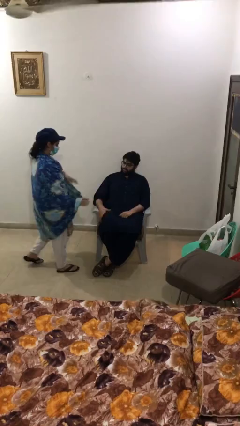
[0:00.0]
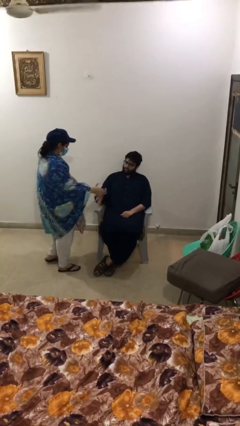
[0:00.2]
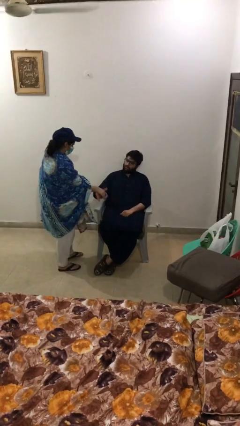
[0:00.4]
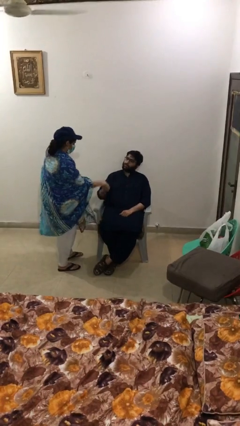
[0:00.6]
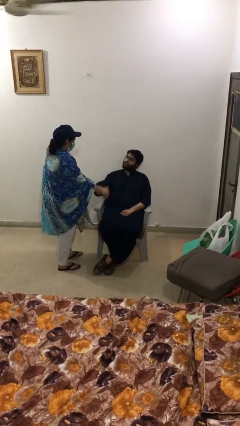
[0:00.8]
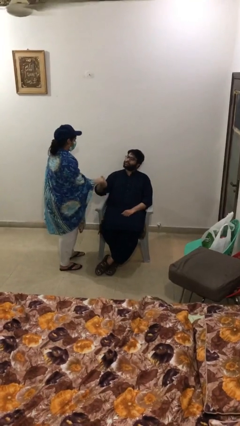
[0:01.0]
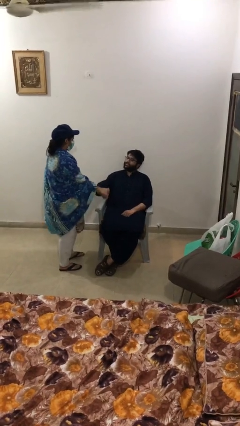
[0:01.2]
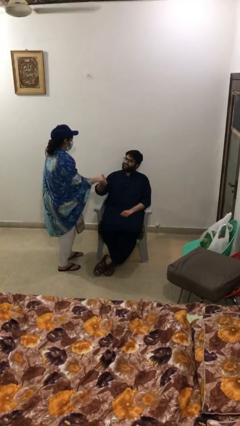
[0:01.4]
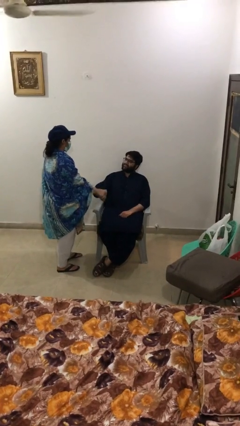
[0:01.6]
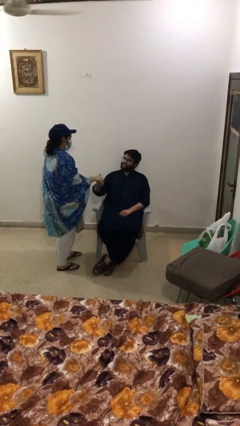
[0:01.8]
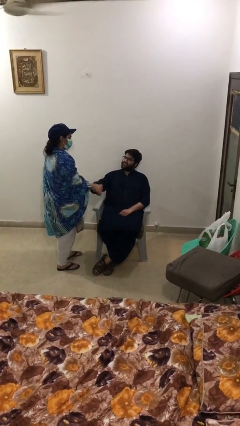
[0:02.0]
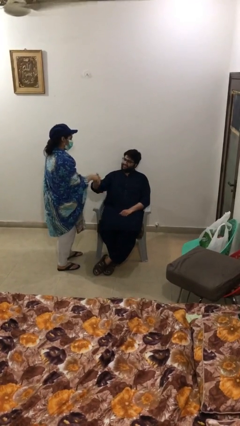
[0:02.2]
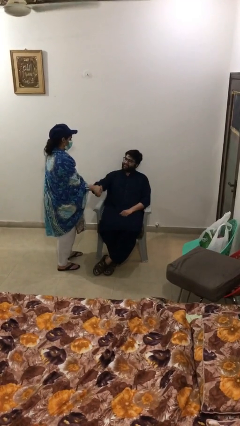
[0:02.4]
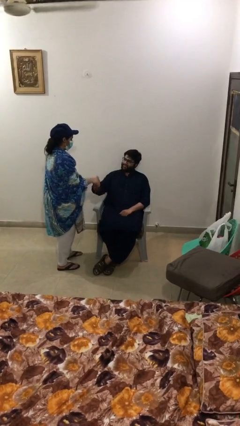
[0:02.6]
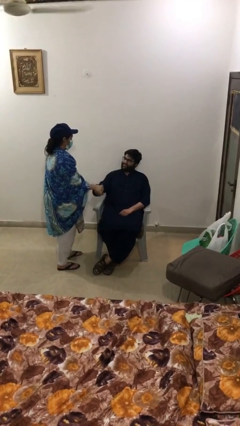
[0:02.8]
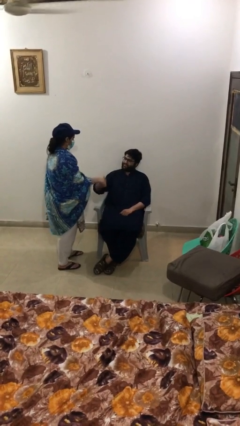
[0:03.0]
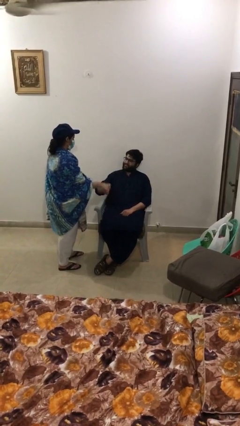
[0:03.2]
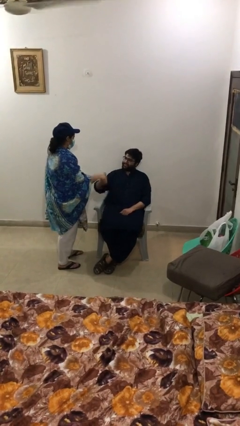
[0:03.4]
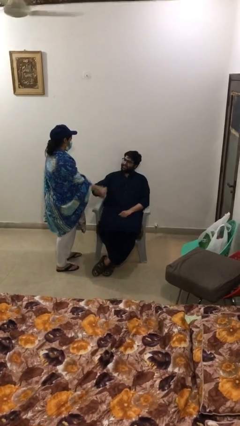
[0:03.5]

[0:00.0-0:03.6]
person shakes hand

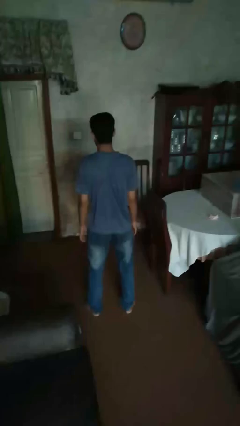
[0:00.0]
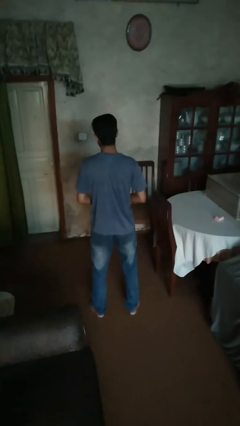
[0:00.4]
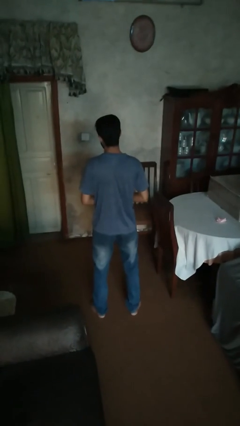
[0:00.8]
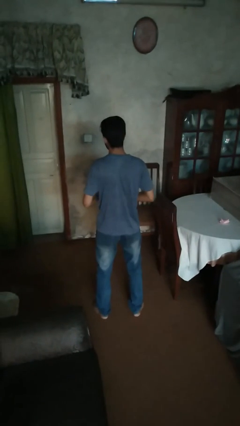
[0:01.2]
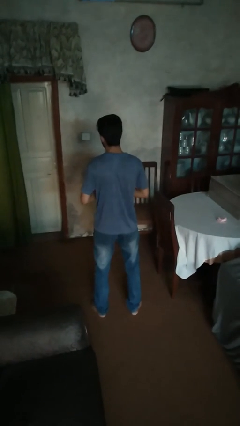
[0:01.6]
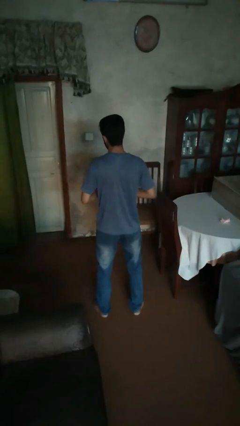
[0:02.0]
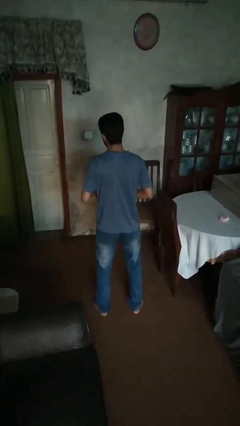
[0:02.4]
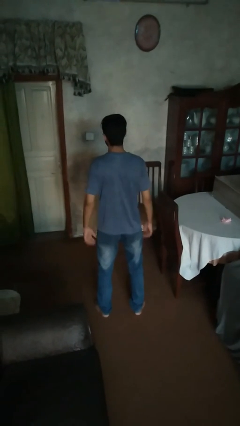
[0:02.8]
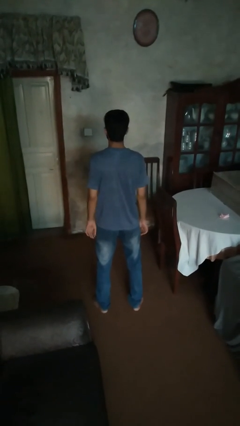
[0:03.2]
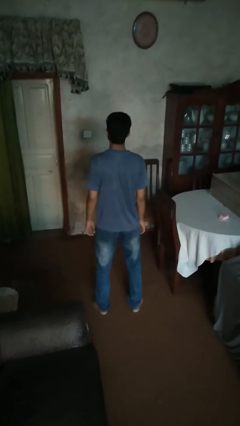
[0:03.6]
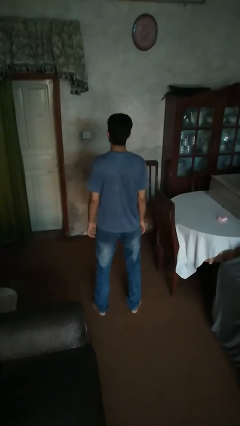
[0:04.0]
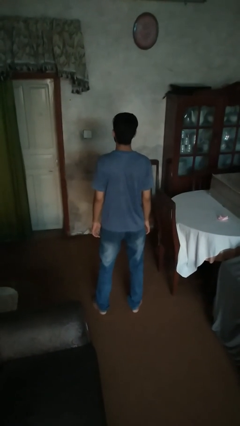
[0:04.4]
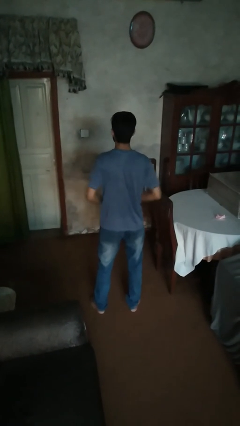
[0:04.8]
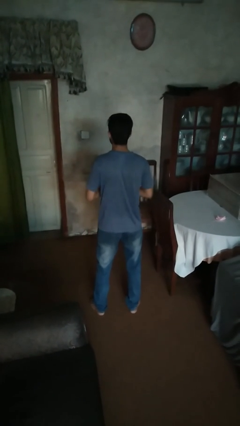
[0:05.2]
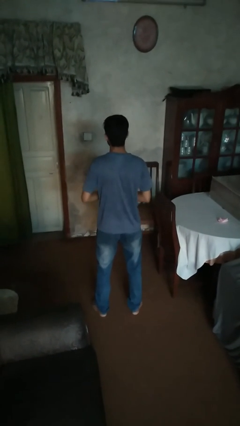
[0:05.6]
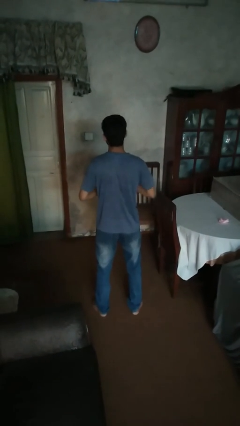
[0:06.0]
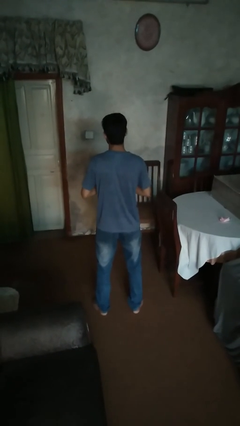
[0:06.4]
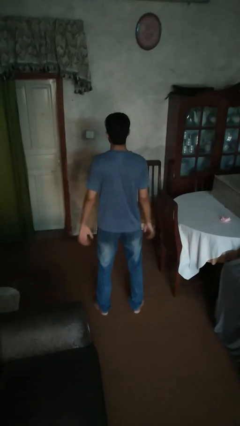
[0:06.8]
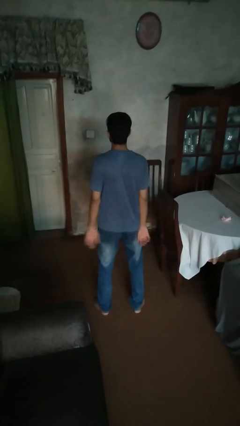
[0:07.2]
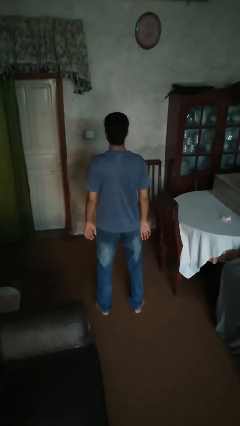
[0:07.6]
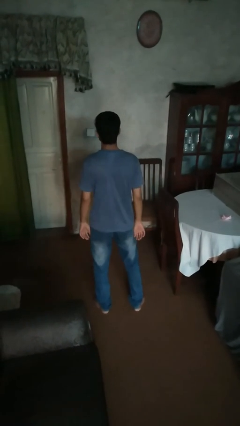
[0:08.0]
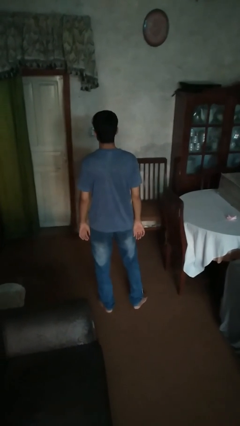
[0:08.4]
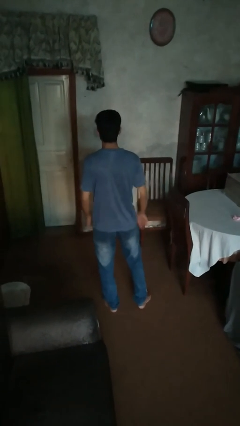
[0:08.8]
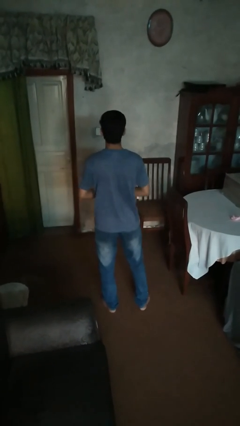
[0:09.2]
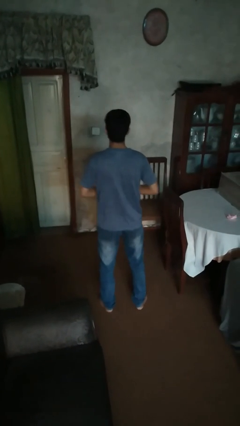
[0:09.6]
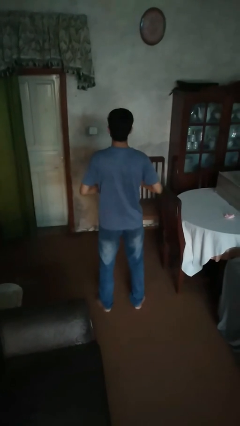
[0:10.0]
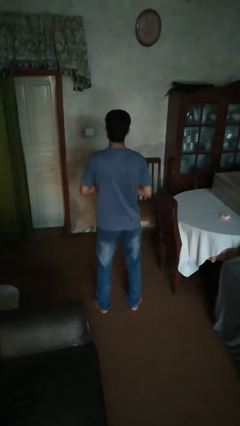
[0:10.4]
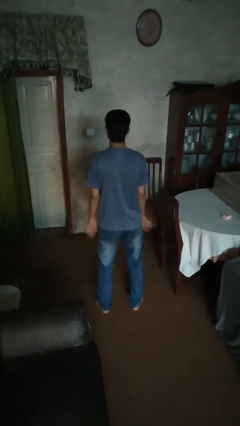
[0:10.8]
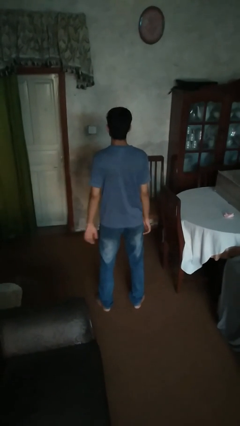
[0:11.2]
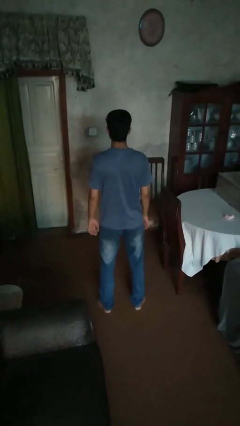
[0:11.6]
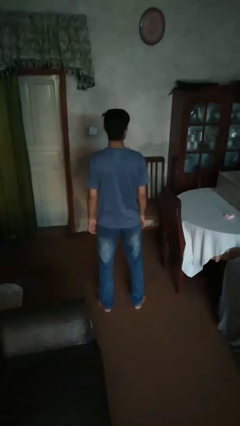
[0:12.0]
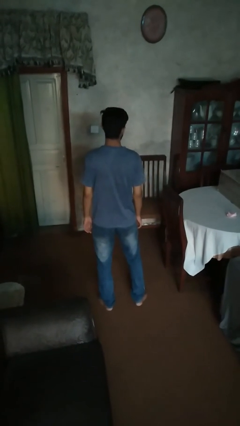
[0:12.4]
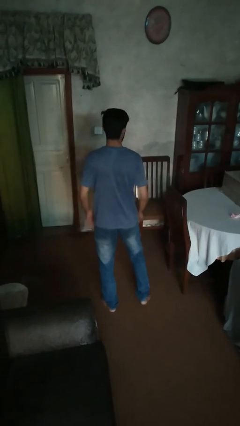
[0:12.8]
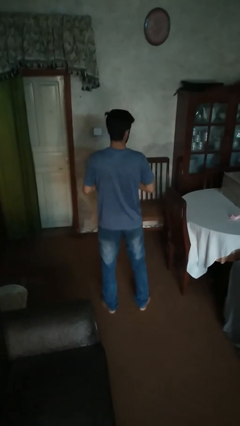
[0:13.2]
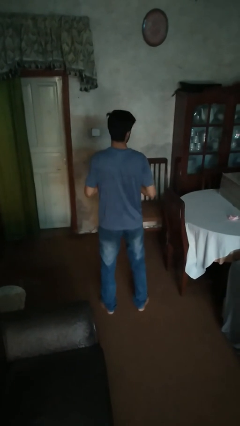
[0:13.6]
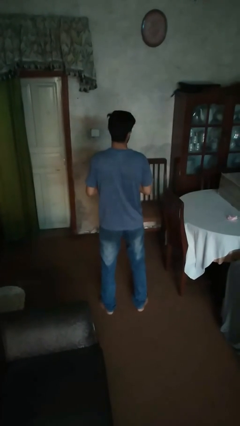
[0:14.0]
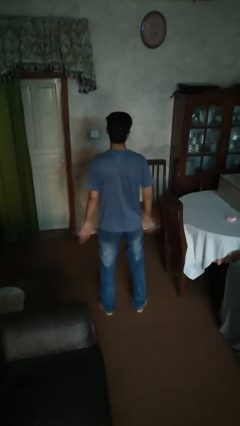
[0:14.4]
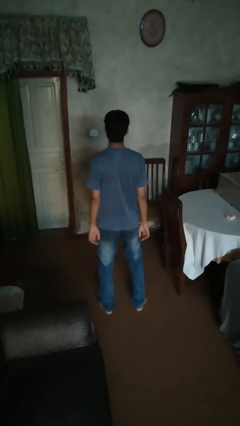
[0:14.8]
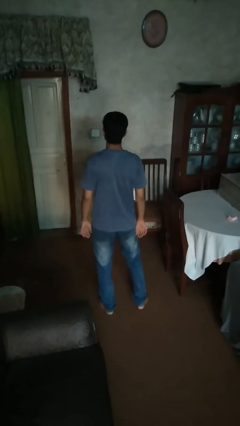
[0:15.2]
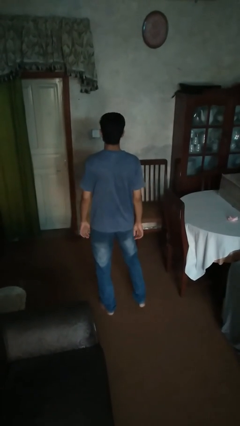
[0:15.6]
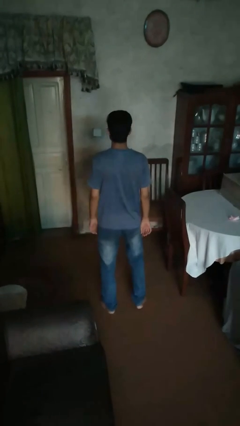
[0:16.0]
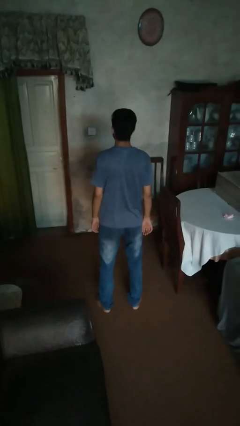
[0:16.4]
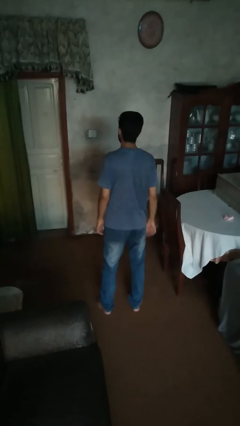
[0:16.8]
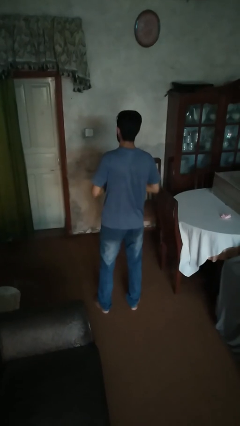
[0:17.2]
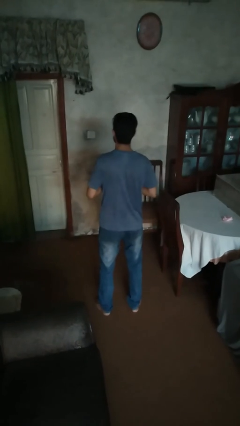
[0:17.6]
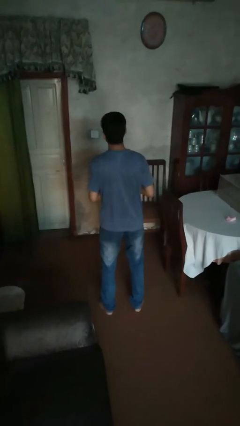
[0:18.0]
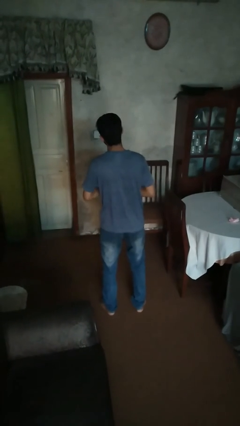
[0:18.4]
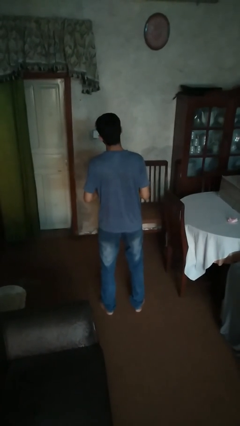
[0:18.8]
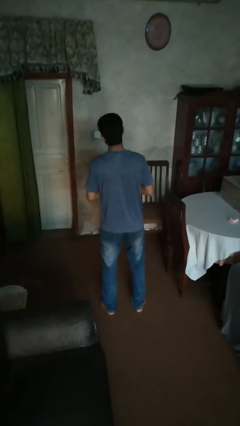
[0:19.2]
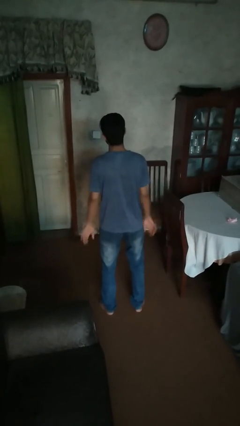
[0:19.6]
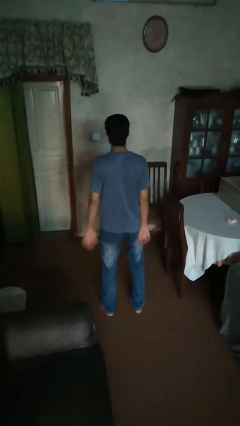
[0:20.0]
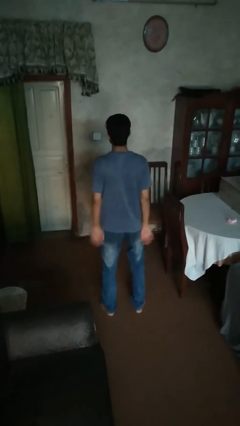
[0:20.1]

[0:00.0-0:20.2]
person cracks knuckles

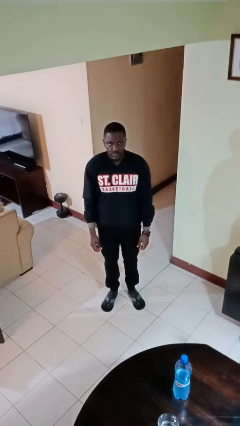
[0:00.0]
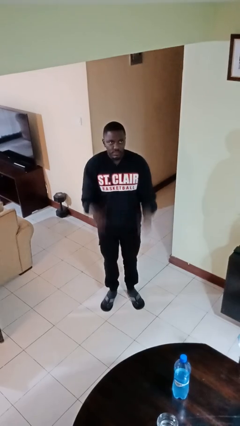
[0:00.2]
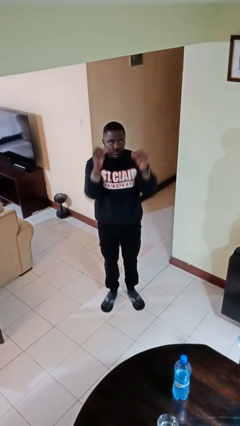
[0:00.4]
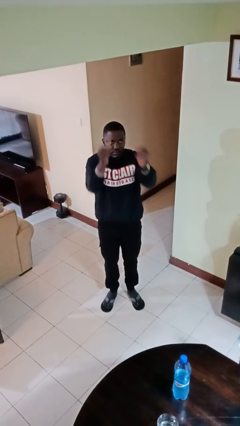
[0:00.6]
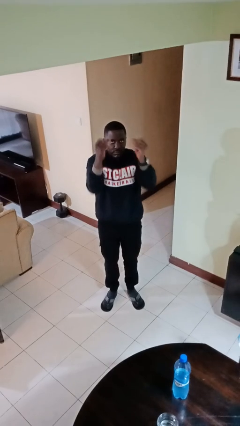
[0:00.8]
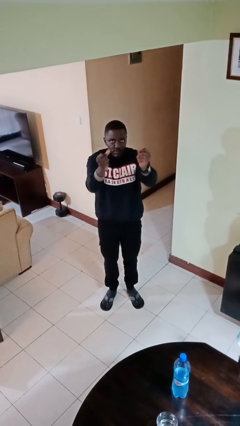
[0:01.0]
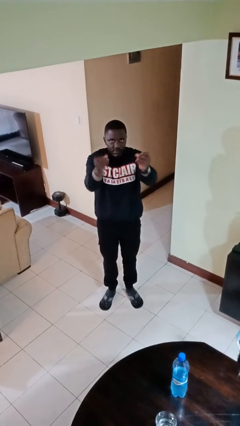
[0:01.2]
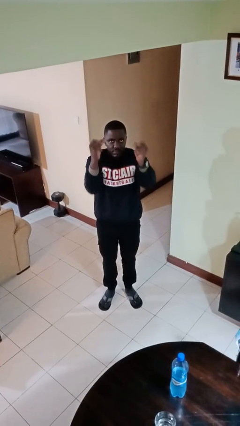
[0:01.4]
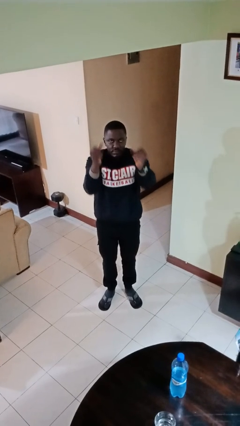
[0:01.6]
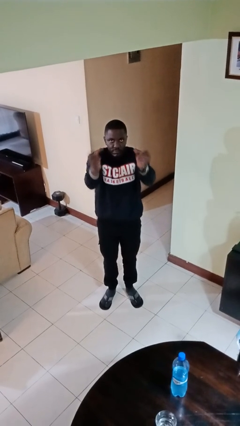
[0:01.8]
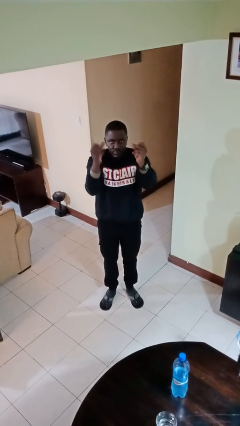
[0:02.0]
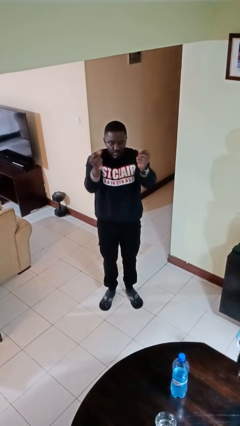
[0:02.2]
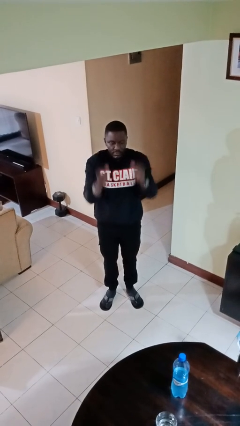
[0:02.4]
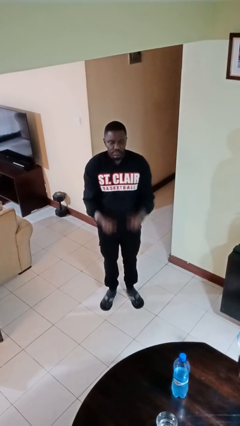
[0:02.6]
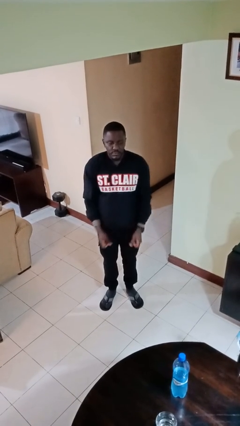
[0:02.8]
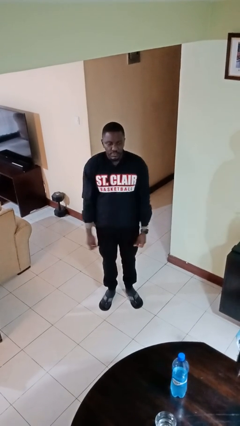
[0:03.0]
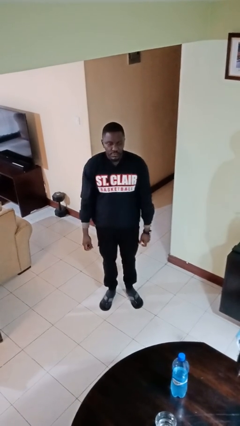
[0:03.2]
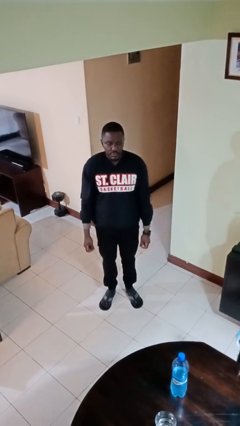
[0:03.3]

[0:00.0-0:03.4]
person snaps fingers

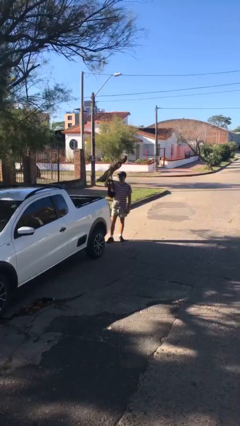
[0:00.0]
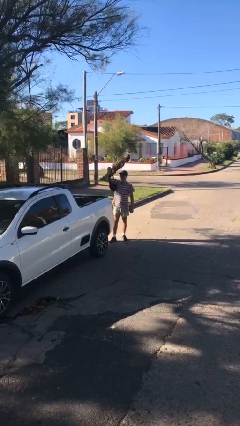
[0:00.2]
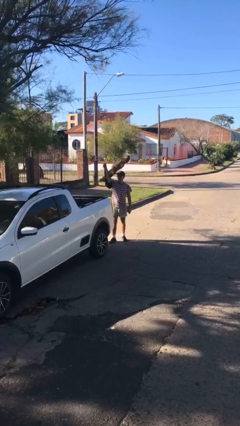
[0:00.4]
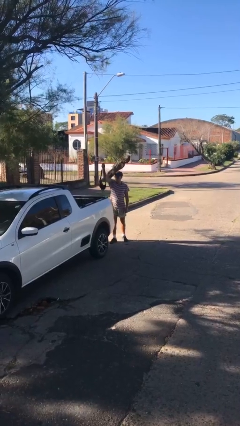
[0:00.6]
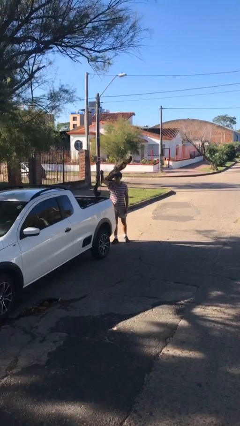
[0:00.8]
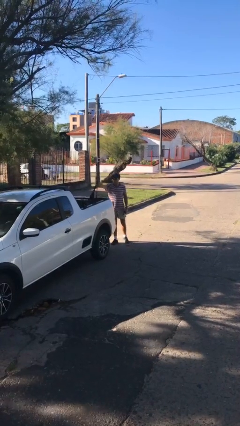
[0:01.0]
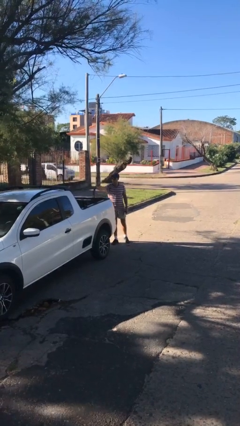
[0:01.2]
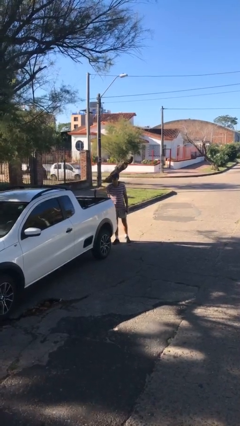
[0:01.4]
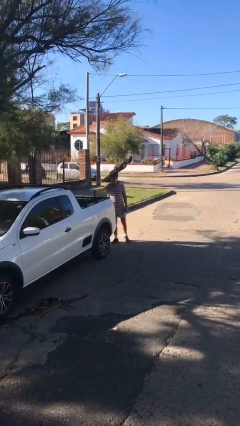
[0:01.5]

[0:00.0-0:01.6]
person loads car
